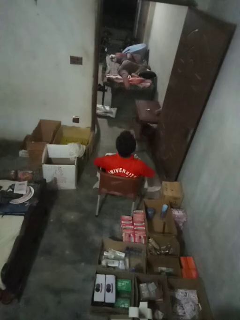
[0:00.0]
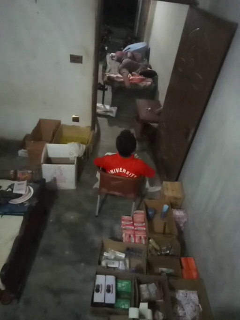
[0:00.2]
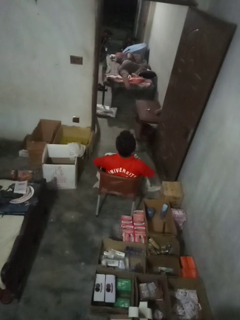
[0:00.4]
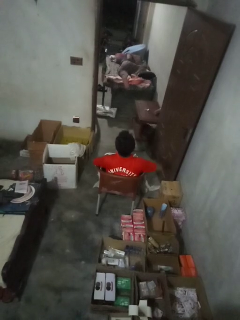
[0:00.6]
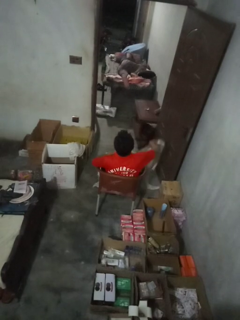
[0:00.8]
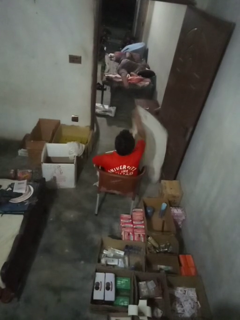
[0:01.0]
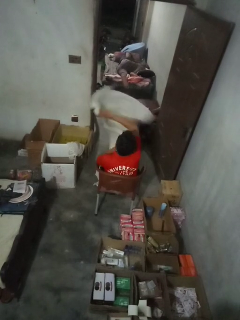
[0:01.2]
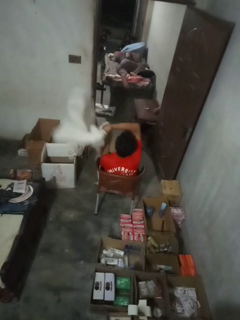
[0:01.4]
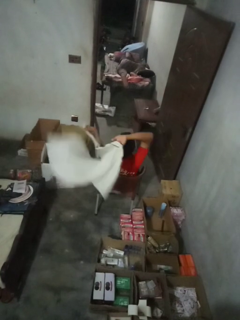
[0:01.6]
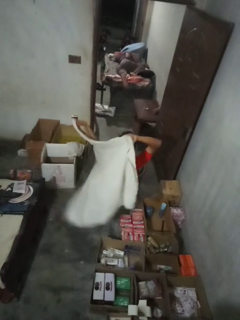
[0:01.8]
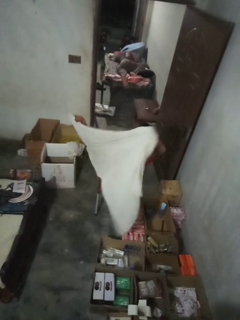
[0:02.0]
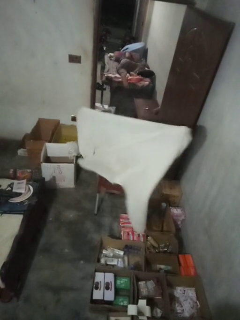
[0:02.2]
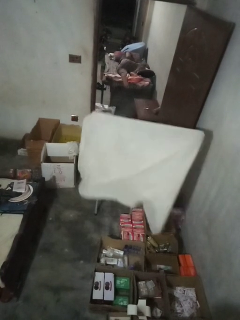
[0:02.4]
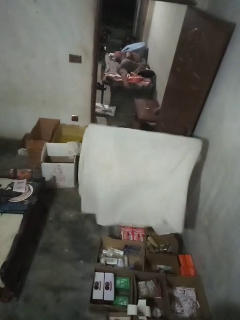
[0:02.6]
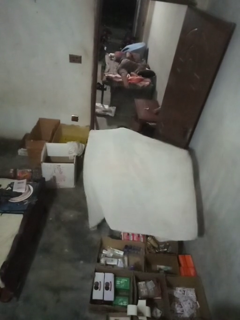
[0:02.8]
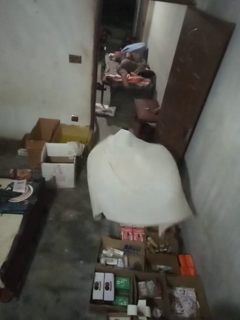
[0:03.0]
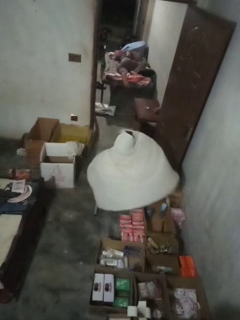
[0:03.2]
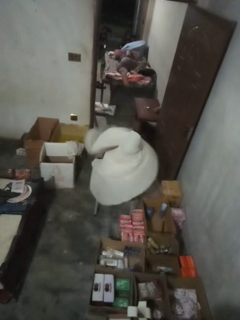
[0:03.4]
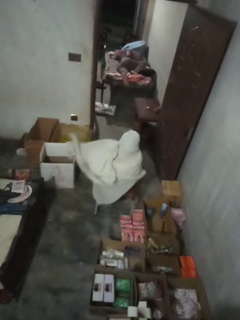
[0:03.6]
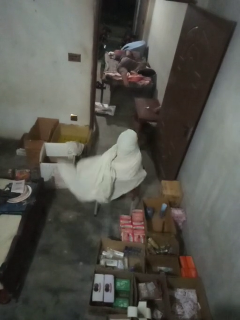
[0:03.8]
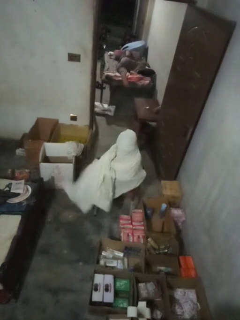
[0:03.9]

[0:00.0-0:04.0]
person folds blanket

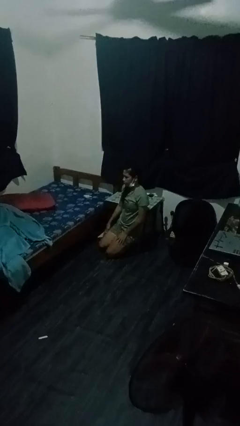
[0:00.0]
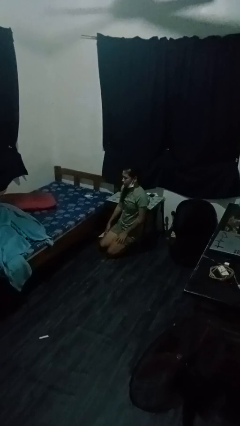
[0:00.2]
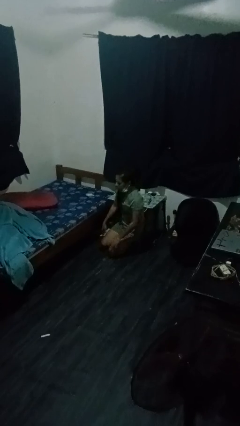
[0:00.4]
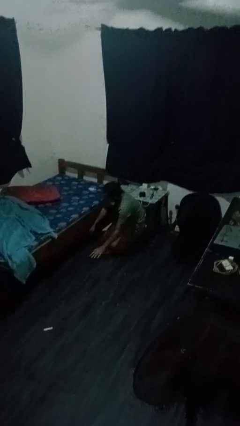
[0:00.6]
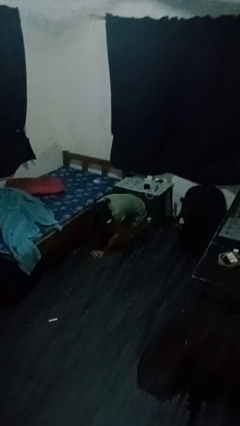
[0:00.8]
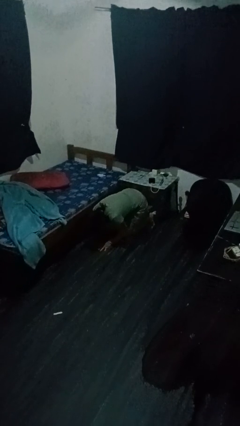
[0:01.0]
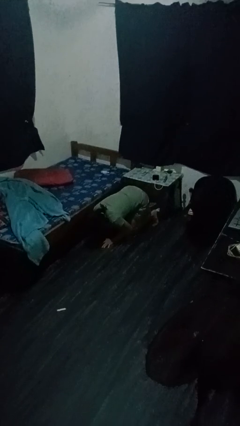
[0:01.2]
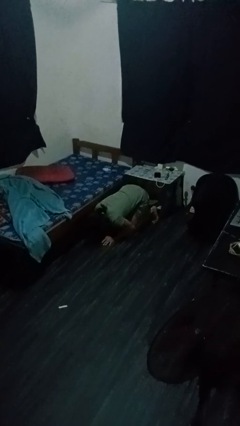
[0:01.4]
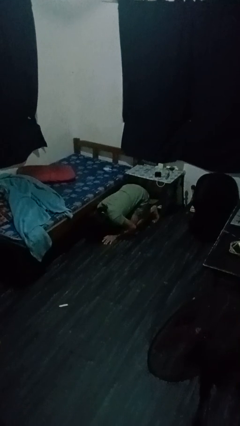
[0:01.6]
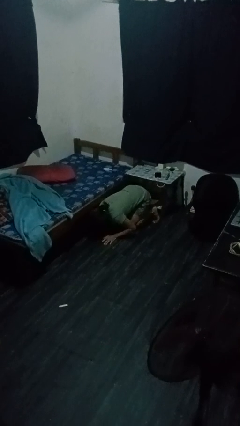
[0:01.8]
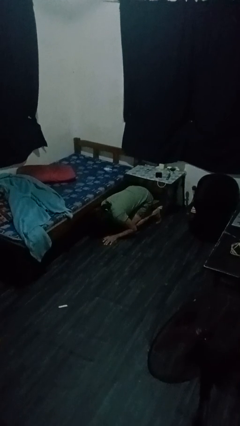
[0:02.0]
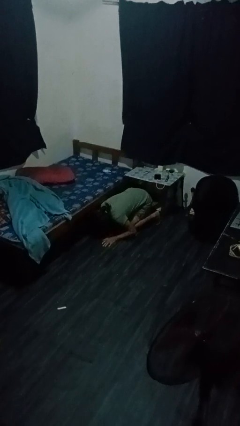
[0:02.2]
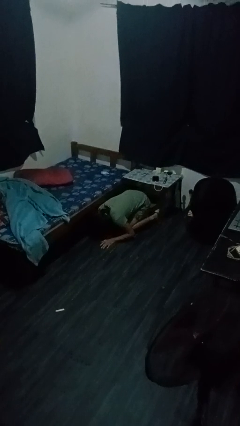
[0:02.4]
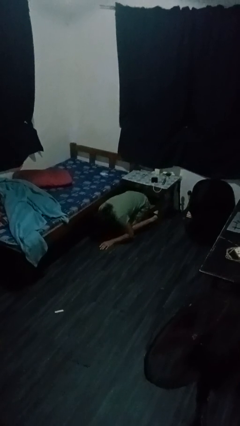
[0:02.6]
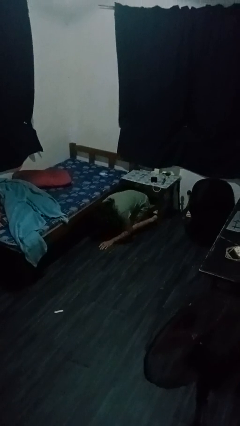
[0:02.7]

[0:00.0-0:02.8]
person searches under bed

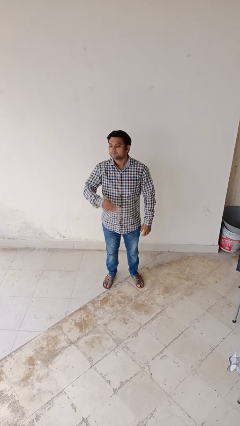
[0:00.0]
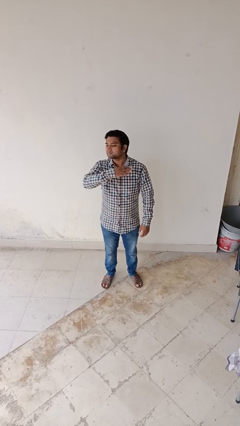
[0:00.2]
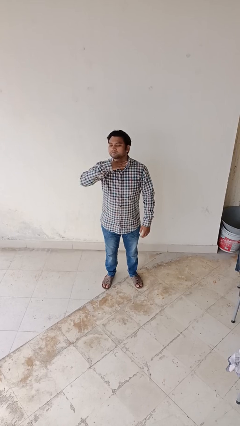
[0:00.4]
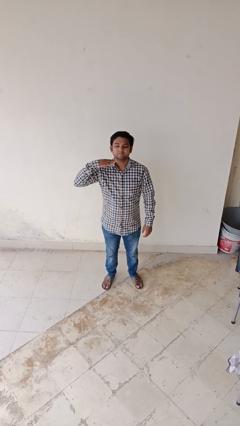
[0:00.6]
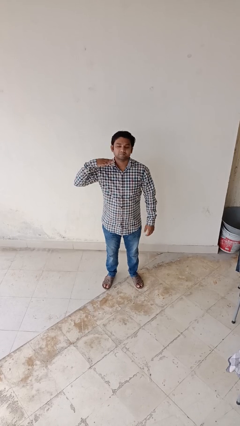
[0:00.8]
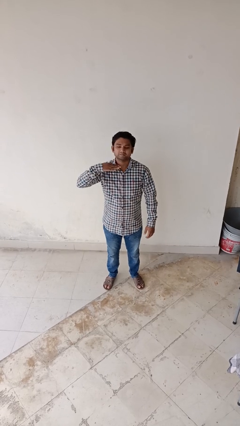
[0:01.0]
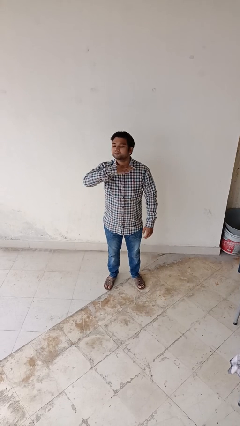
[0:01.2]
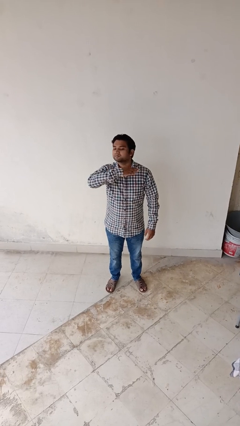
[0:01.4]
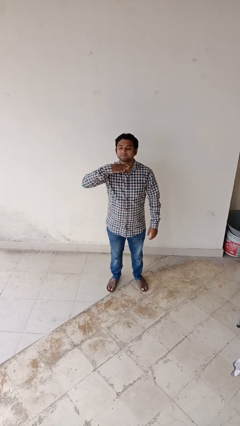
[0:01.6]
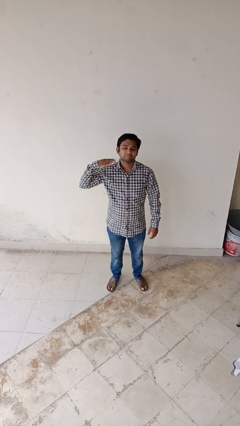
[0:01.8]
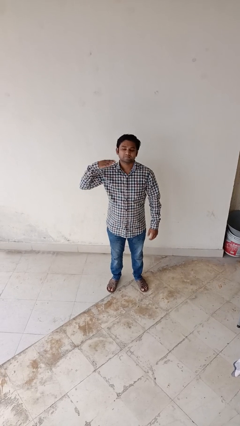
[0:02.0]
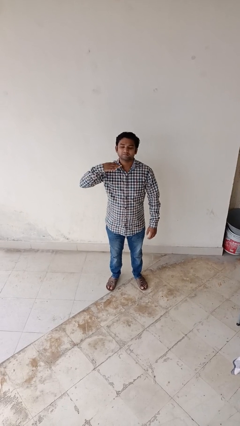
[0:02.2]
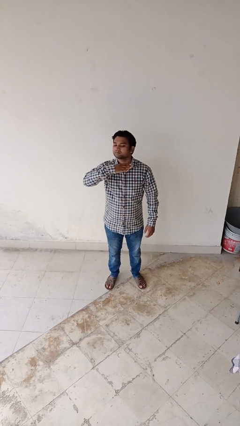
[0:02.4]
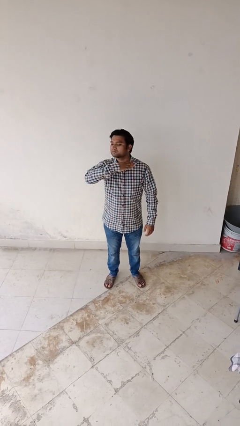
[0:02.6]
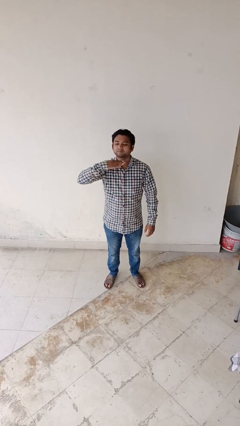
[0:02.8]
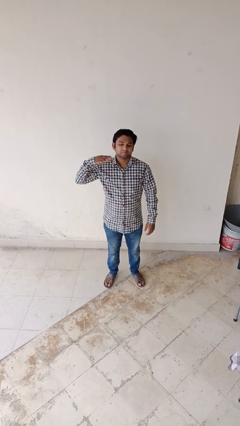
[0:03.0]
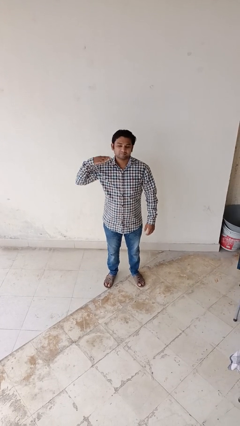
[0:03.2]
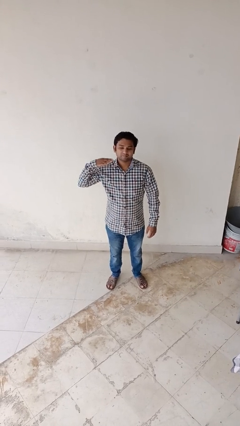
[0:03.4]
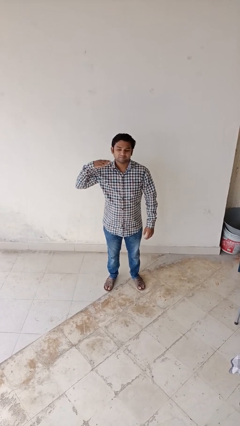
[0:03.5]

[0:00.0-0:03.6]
person gestures cut

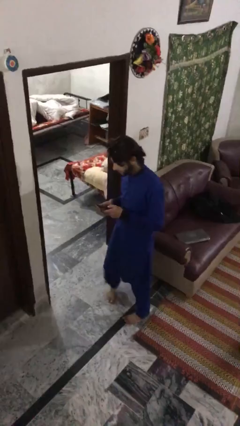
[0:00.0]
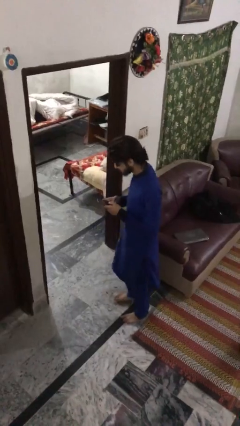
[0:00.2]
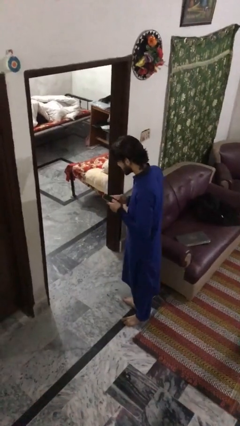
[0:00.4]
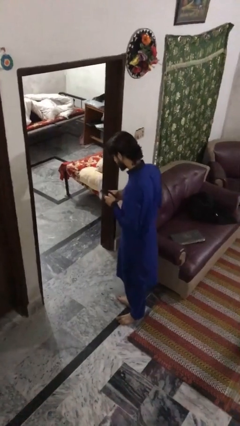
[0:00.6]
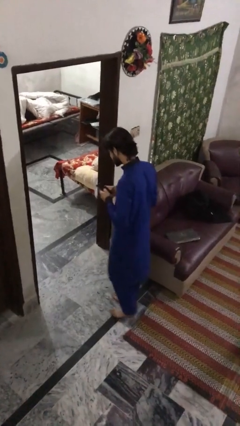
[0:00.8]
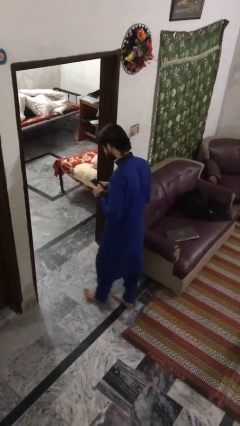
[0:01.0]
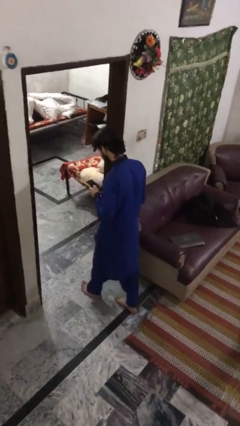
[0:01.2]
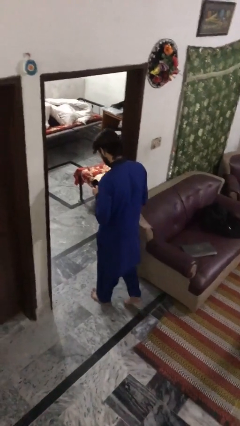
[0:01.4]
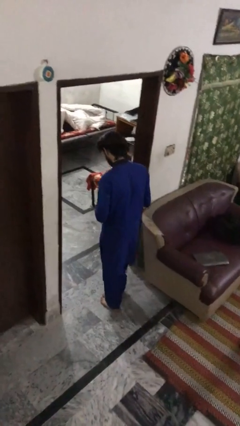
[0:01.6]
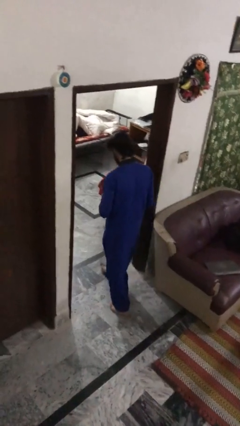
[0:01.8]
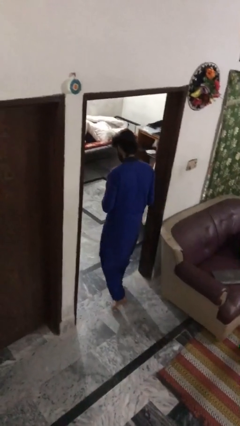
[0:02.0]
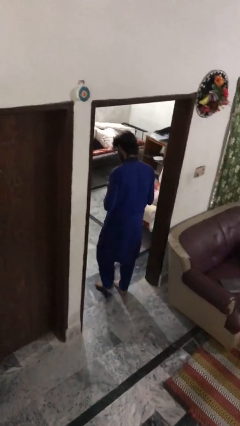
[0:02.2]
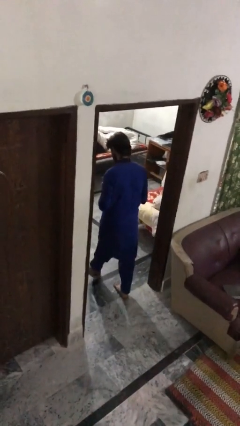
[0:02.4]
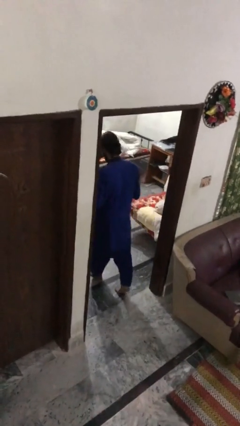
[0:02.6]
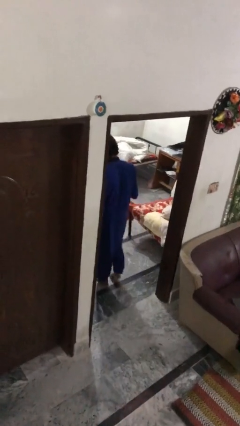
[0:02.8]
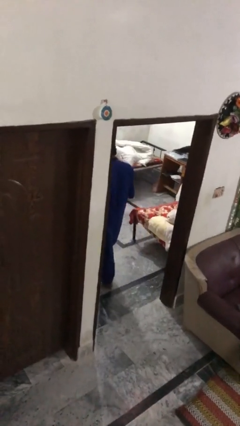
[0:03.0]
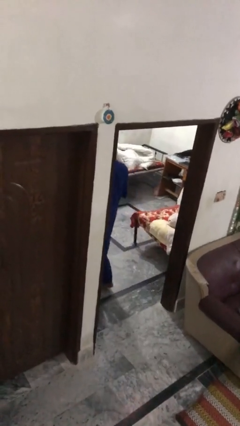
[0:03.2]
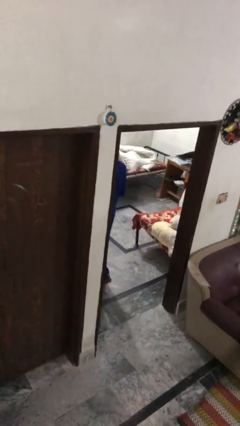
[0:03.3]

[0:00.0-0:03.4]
person exits scene through structure

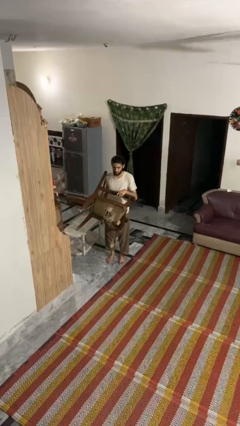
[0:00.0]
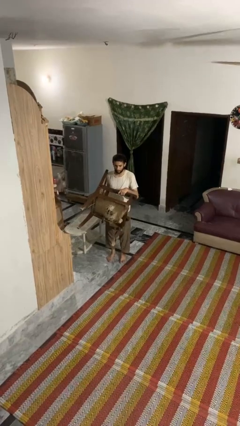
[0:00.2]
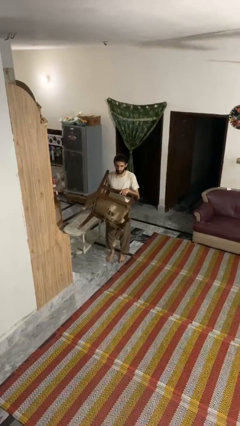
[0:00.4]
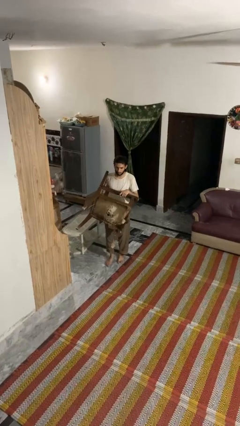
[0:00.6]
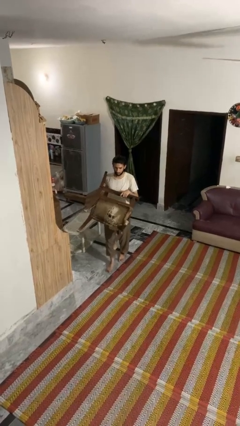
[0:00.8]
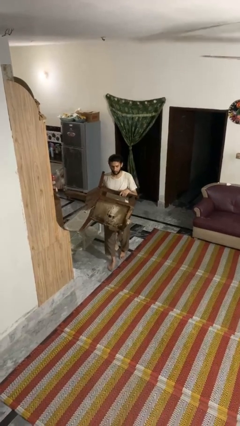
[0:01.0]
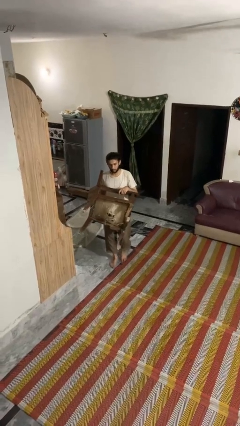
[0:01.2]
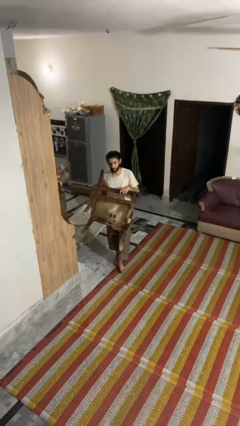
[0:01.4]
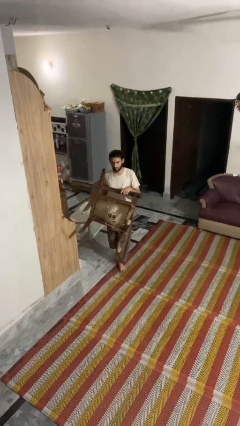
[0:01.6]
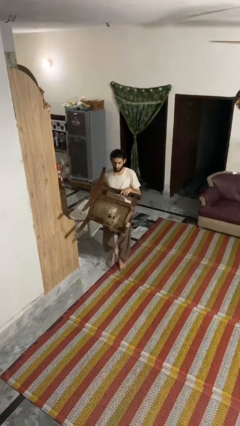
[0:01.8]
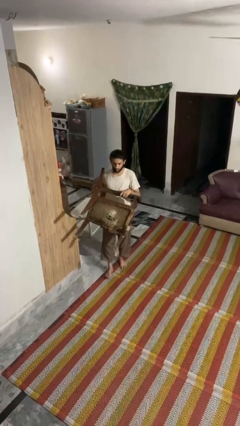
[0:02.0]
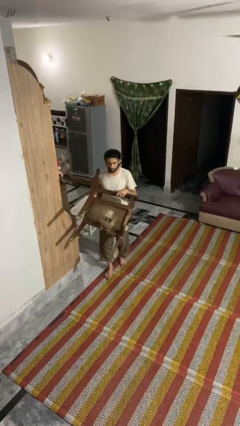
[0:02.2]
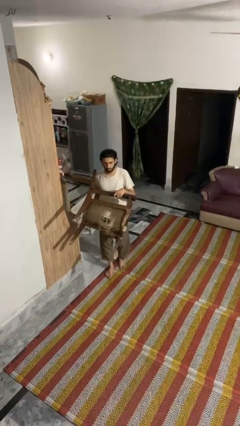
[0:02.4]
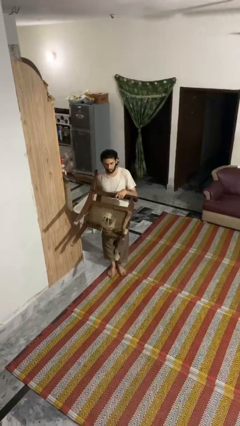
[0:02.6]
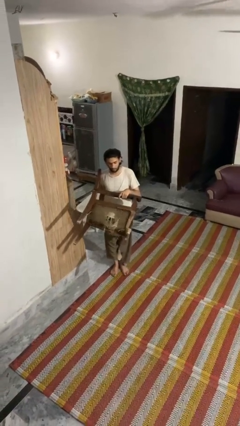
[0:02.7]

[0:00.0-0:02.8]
person carries furniture

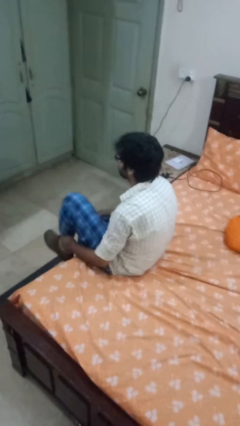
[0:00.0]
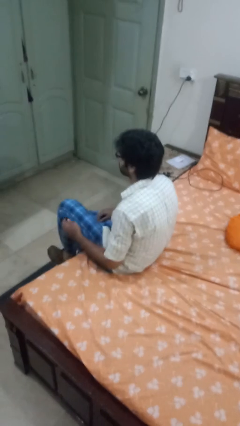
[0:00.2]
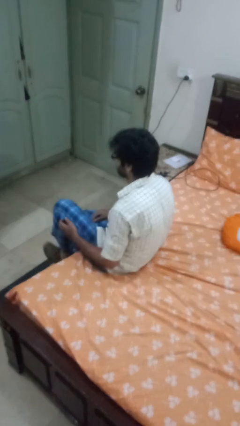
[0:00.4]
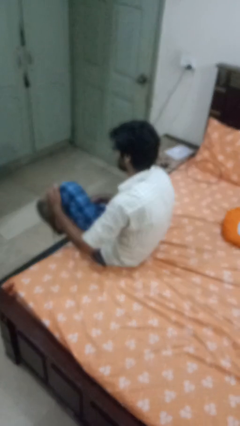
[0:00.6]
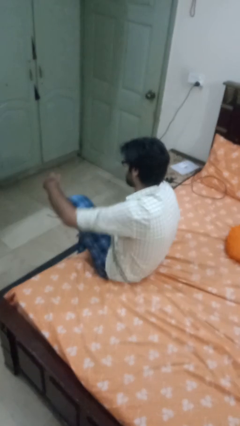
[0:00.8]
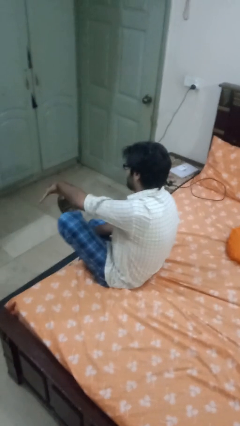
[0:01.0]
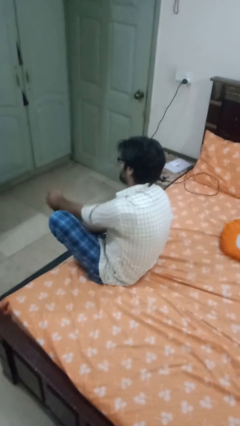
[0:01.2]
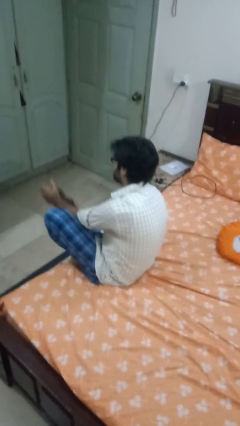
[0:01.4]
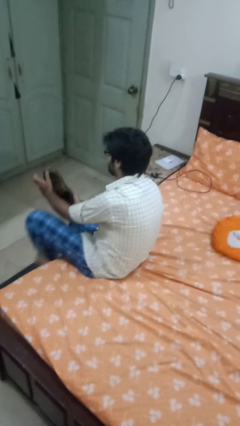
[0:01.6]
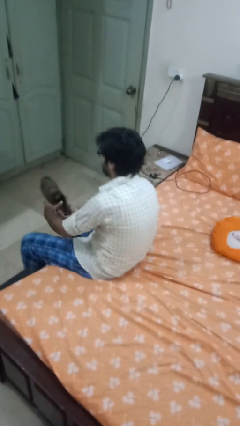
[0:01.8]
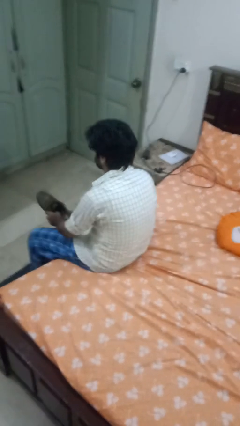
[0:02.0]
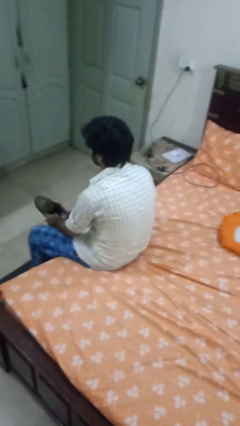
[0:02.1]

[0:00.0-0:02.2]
person takes off shoes
